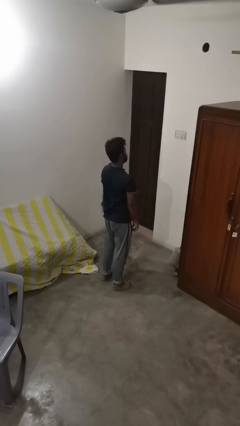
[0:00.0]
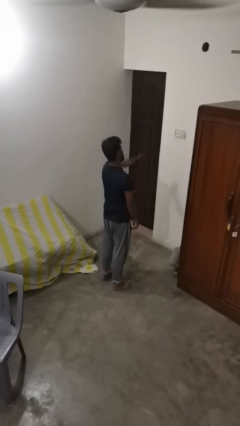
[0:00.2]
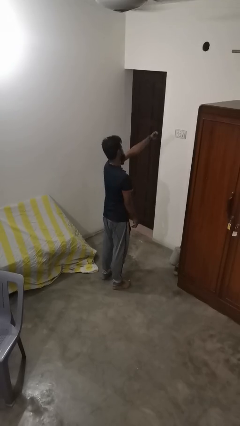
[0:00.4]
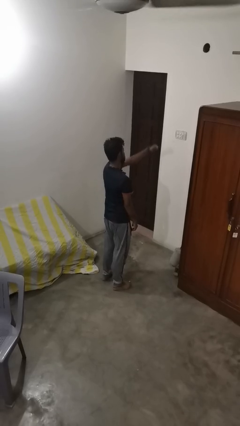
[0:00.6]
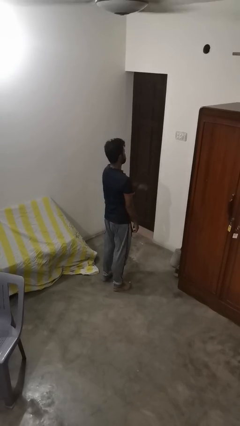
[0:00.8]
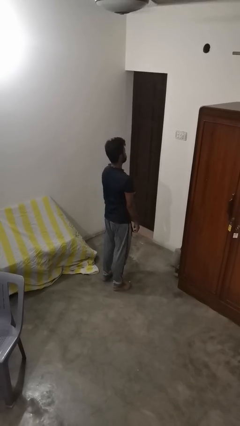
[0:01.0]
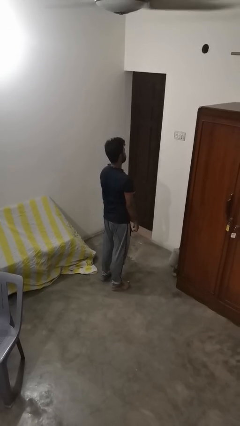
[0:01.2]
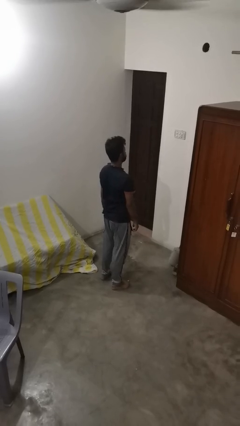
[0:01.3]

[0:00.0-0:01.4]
person punches

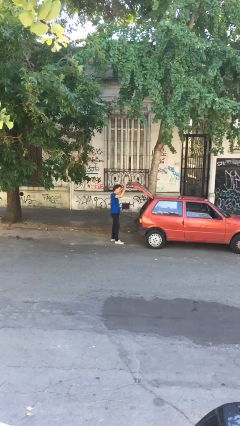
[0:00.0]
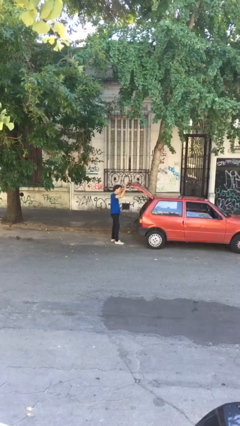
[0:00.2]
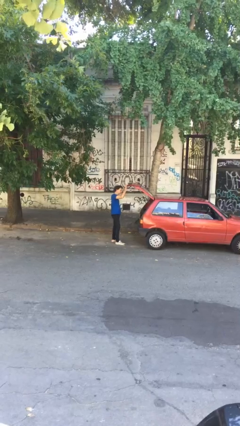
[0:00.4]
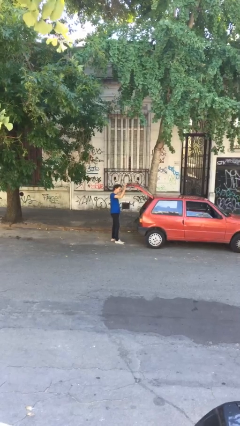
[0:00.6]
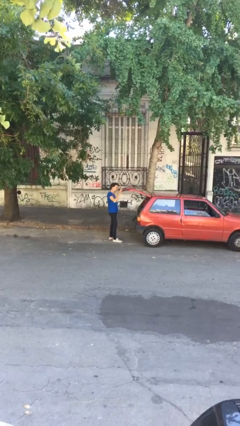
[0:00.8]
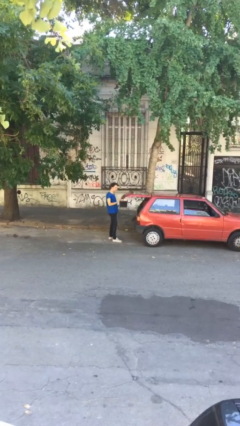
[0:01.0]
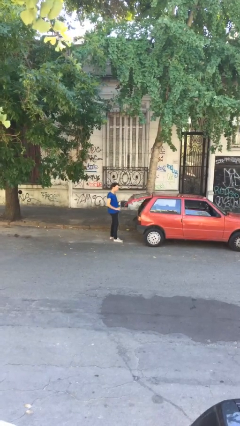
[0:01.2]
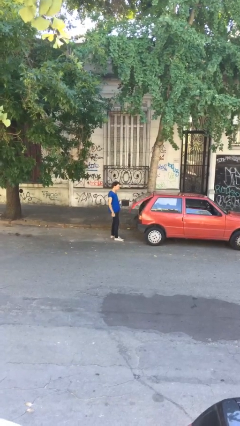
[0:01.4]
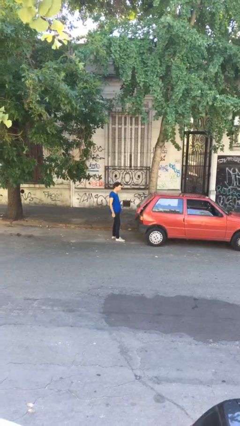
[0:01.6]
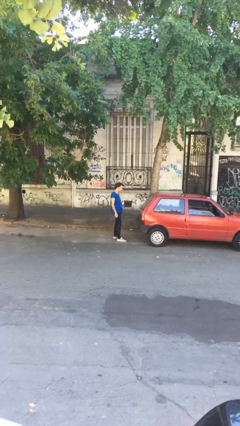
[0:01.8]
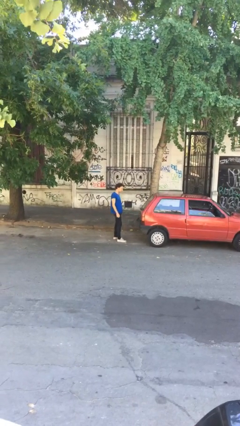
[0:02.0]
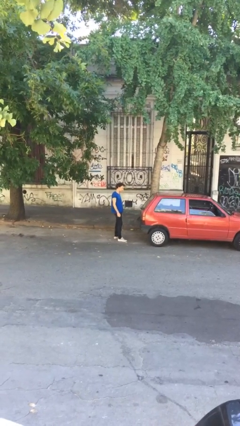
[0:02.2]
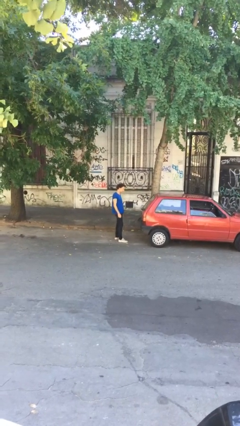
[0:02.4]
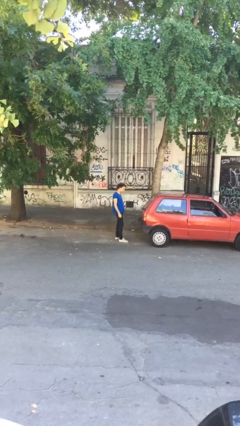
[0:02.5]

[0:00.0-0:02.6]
person closes car trunk

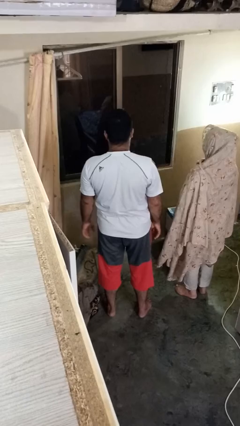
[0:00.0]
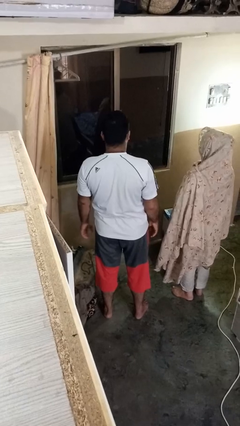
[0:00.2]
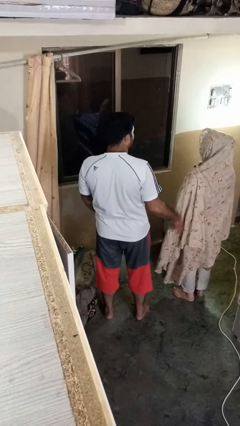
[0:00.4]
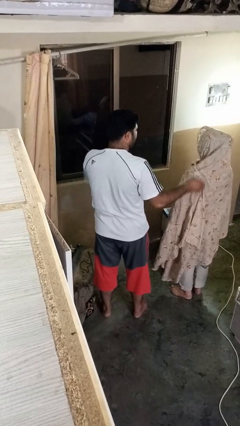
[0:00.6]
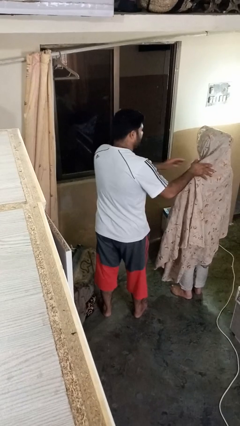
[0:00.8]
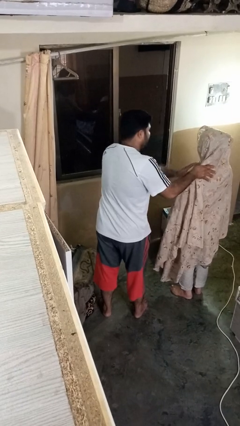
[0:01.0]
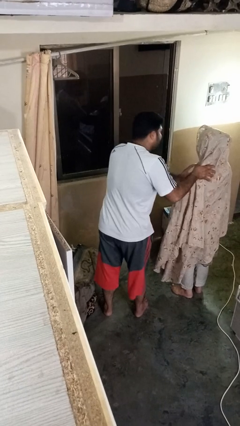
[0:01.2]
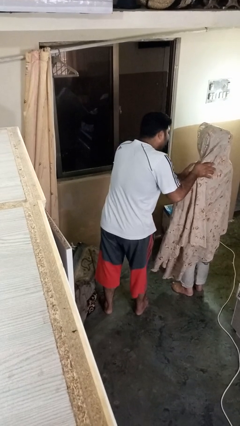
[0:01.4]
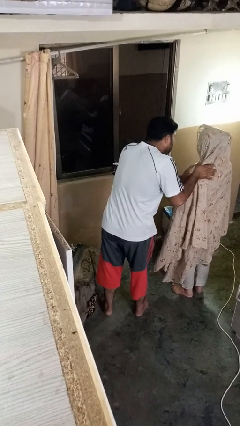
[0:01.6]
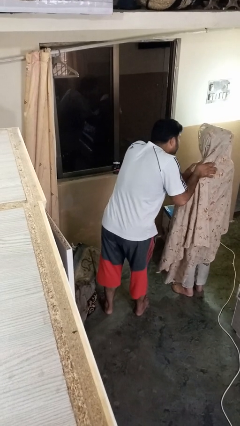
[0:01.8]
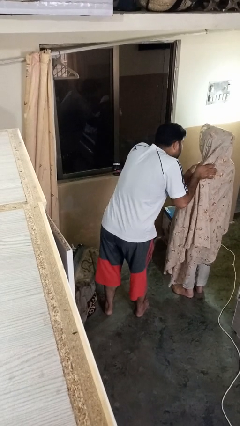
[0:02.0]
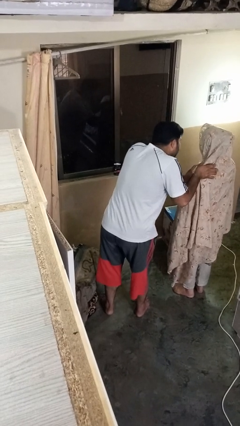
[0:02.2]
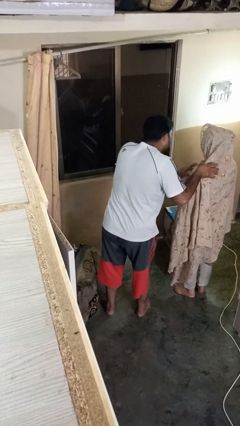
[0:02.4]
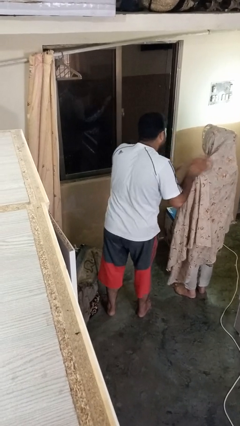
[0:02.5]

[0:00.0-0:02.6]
person shoves person

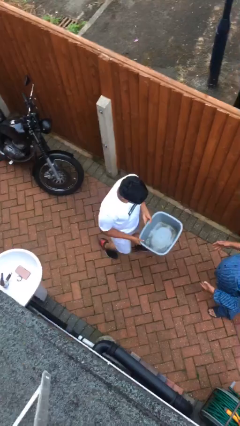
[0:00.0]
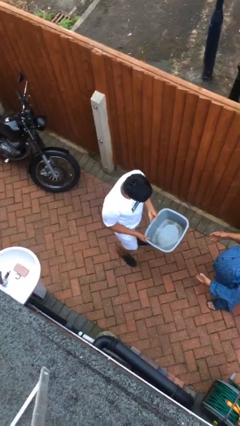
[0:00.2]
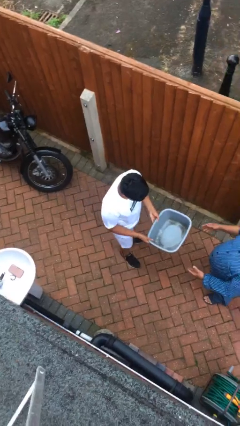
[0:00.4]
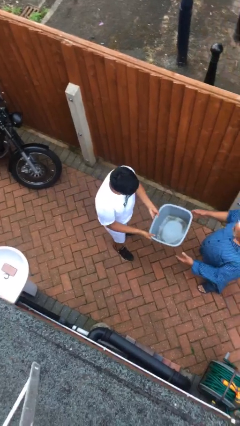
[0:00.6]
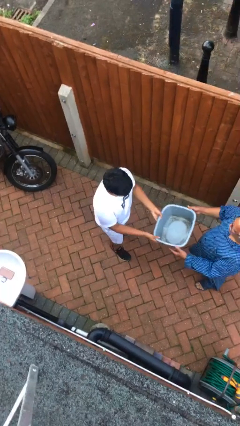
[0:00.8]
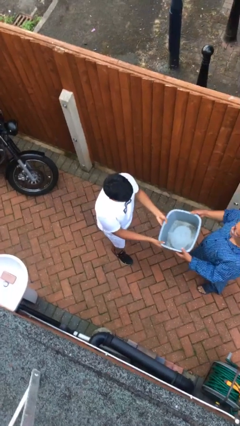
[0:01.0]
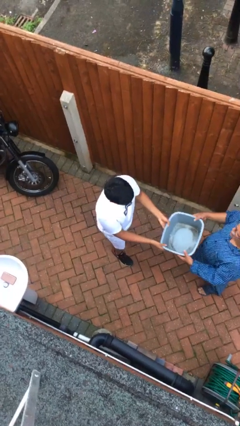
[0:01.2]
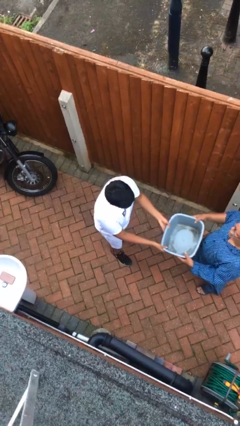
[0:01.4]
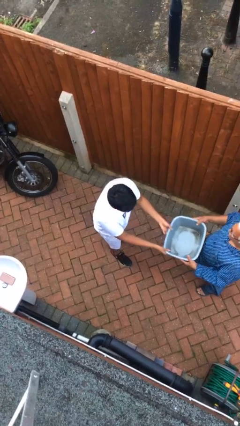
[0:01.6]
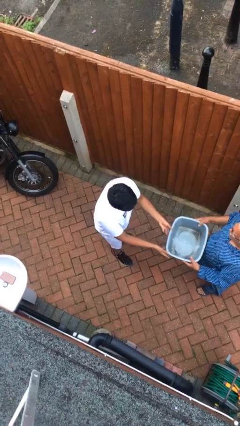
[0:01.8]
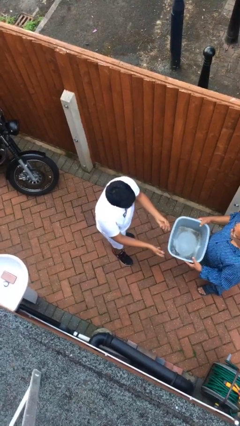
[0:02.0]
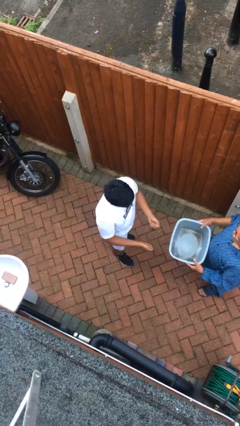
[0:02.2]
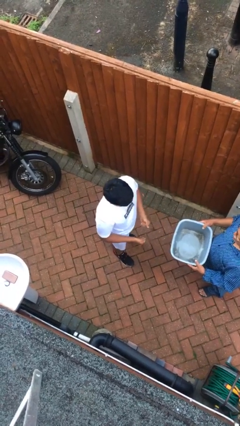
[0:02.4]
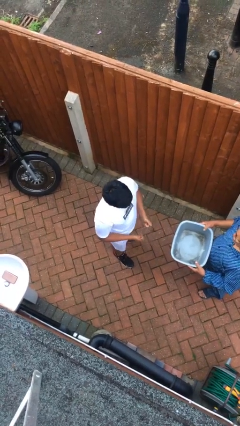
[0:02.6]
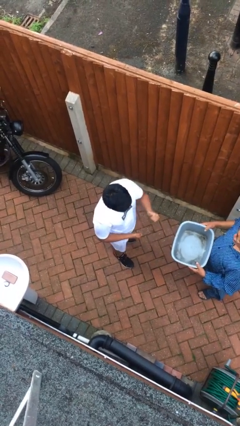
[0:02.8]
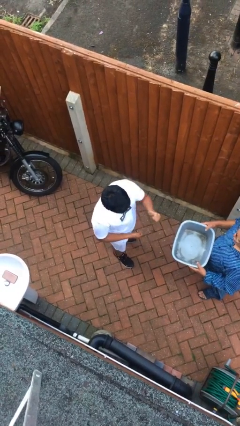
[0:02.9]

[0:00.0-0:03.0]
person transfers object to person

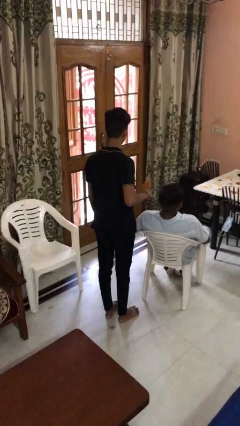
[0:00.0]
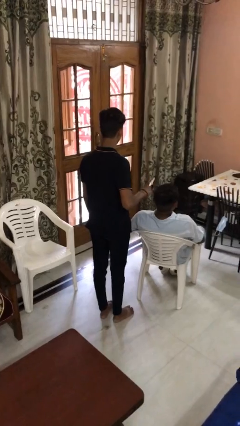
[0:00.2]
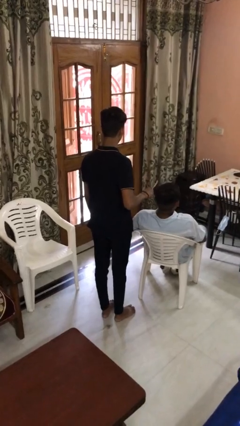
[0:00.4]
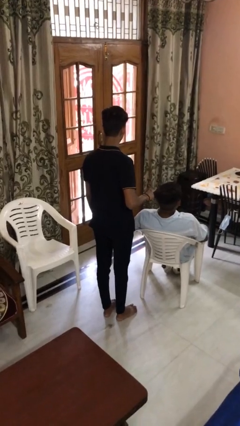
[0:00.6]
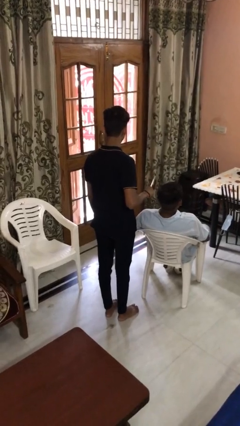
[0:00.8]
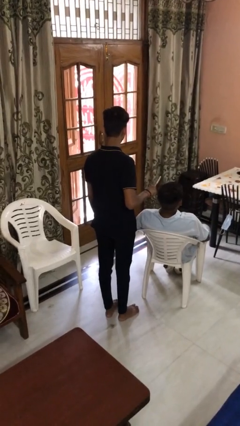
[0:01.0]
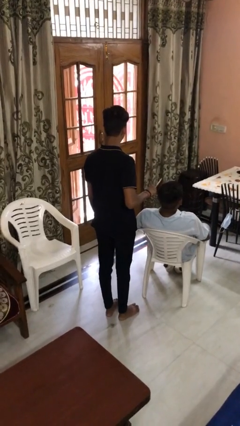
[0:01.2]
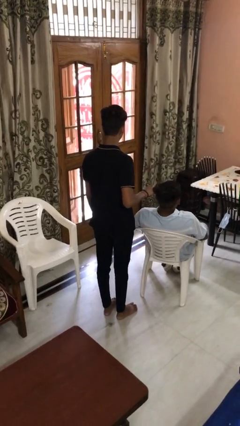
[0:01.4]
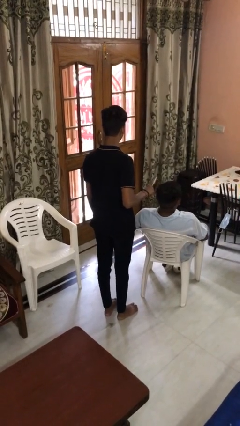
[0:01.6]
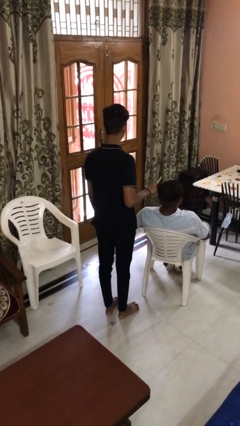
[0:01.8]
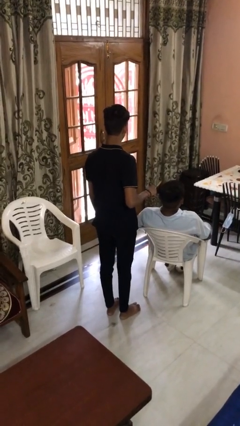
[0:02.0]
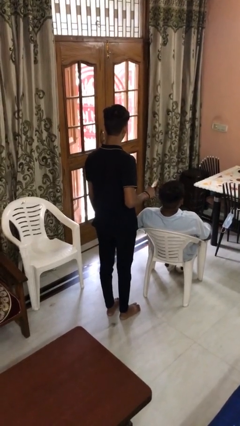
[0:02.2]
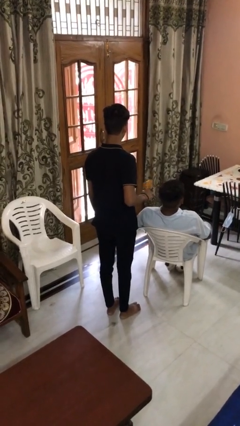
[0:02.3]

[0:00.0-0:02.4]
person brushes hair of person

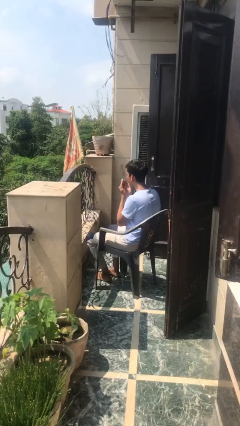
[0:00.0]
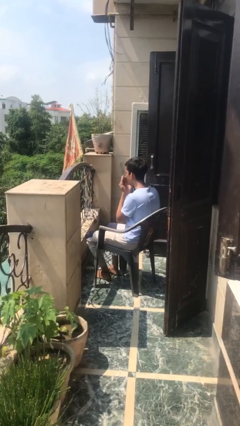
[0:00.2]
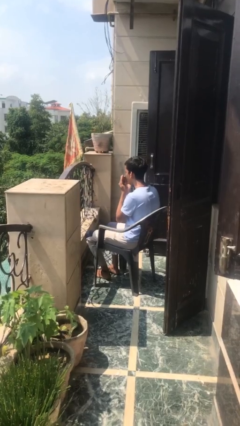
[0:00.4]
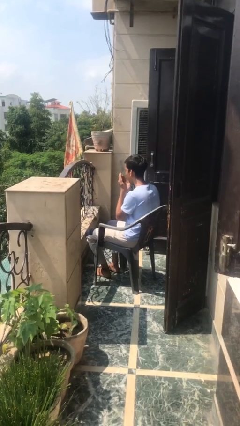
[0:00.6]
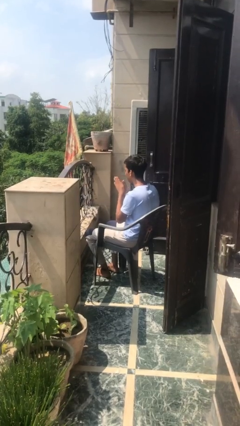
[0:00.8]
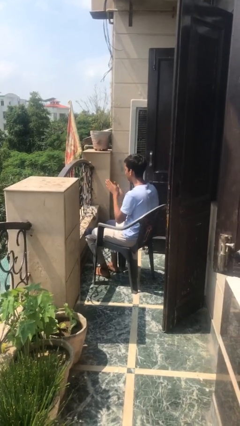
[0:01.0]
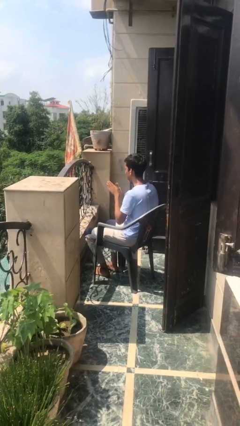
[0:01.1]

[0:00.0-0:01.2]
person blows into hands

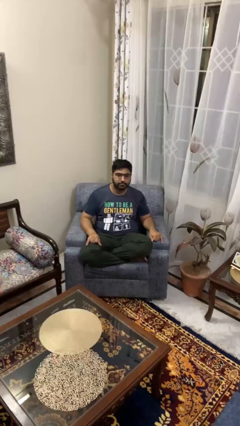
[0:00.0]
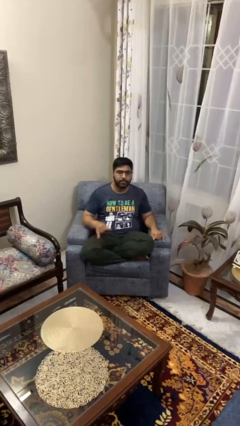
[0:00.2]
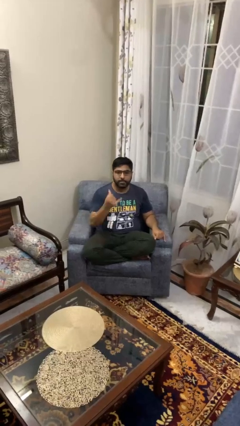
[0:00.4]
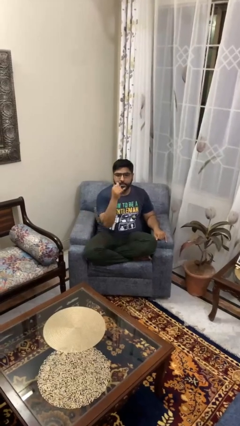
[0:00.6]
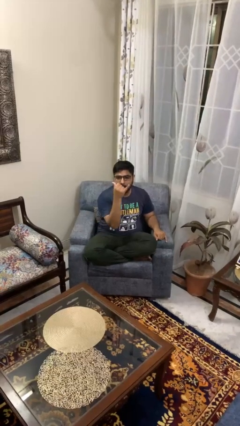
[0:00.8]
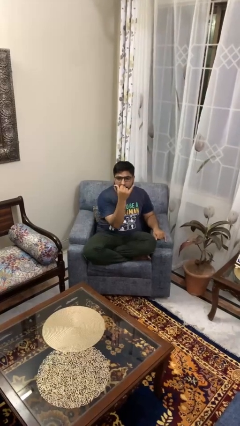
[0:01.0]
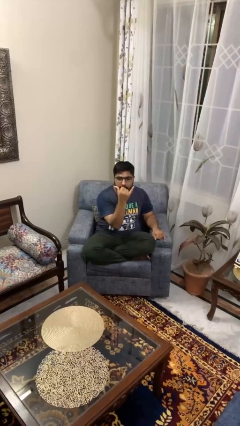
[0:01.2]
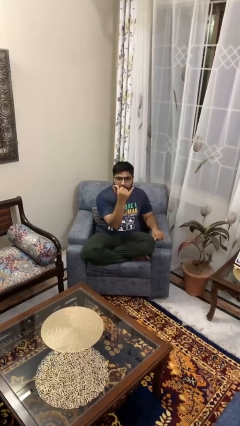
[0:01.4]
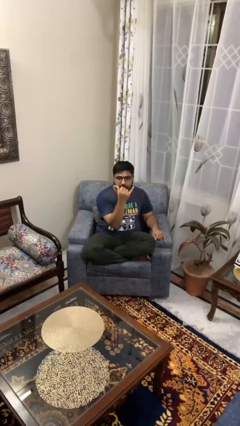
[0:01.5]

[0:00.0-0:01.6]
person gestures hang loose

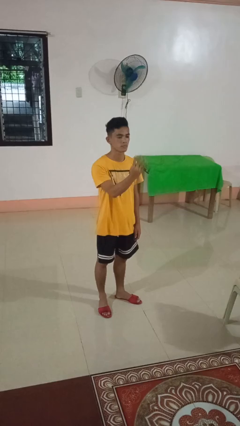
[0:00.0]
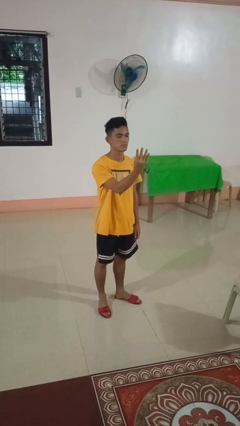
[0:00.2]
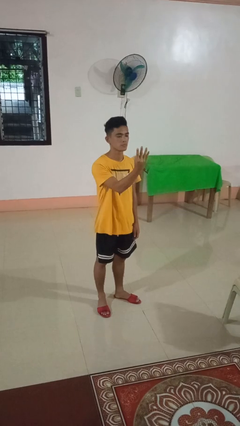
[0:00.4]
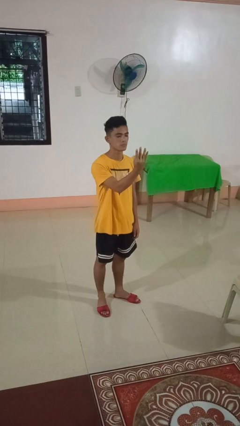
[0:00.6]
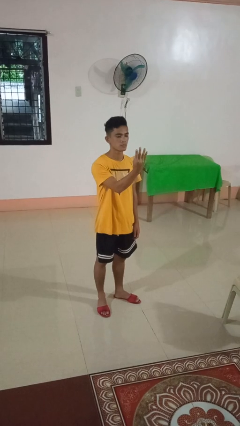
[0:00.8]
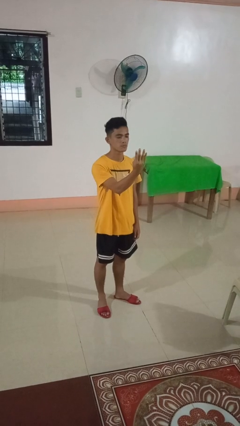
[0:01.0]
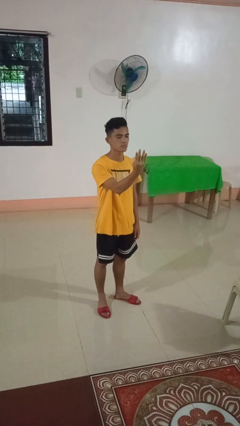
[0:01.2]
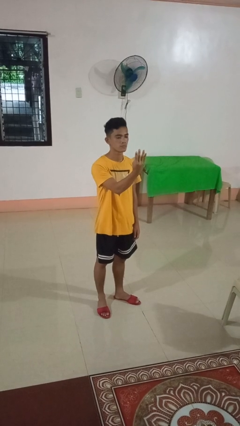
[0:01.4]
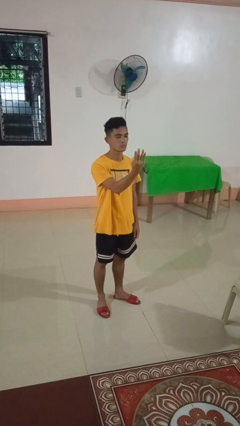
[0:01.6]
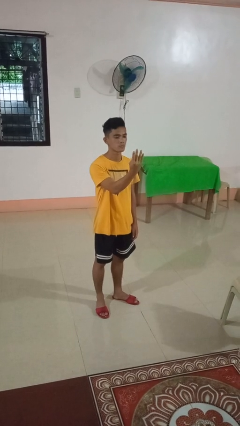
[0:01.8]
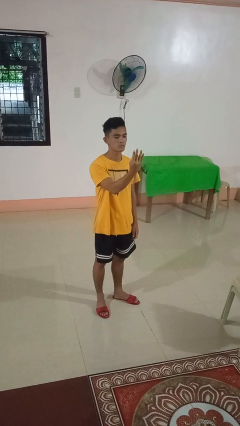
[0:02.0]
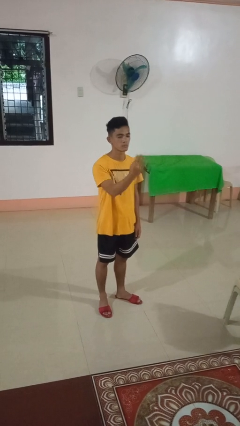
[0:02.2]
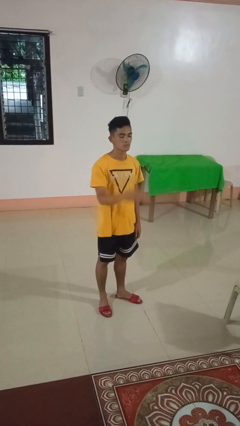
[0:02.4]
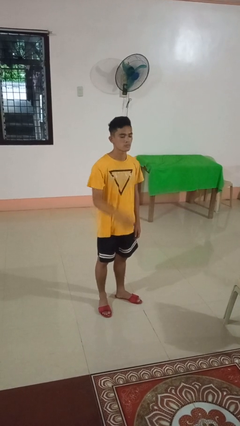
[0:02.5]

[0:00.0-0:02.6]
person gestures number four
